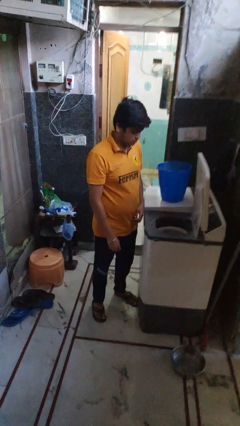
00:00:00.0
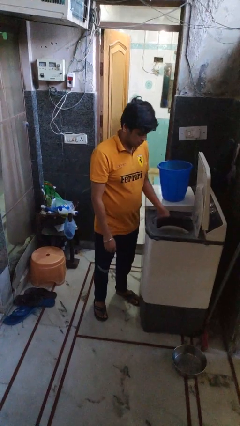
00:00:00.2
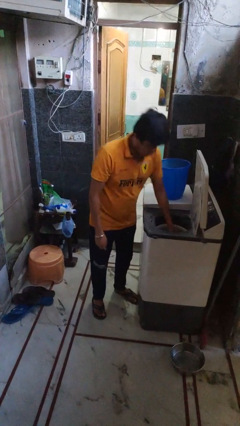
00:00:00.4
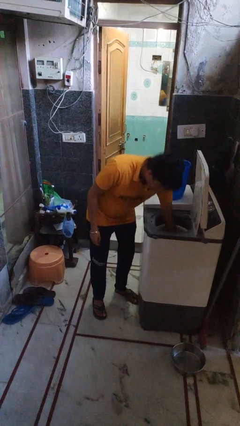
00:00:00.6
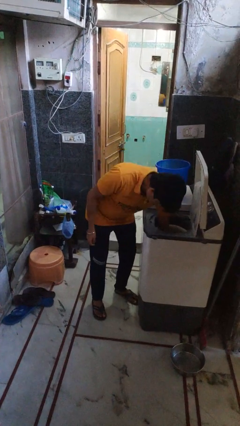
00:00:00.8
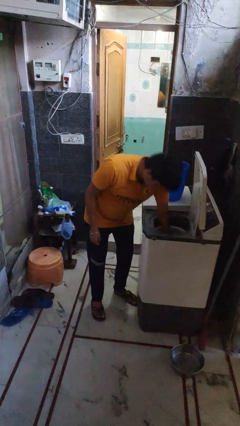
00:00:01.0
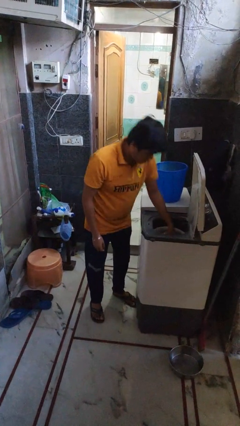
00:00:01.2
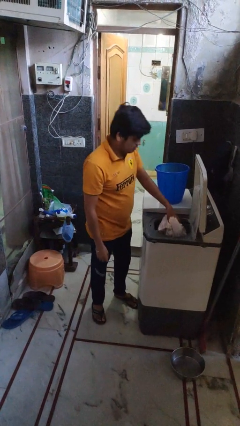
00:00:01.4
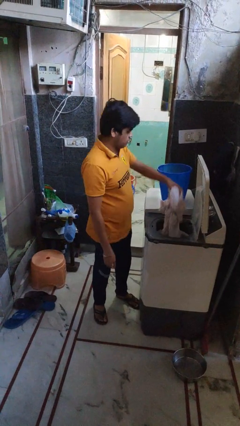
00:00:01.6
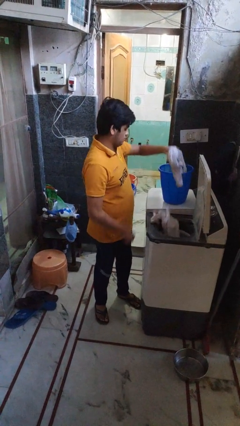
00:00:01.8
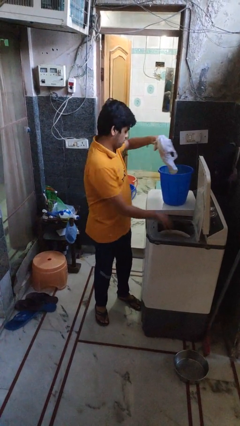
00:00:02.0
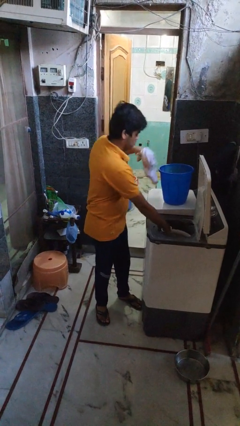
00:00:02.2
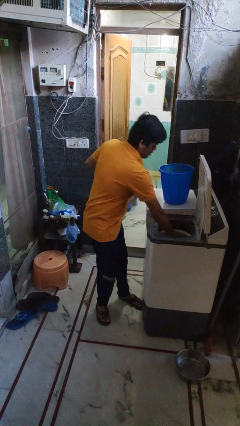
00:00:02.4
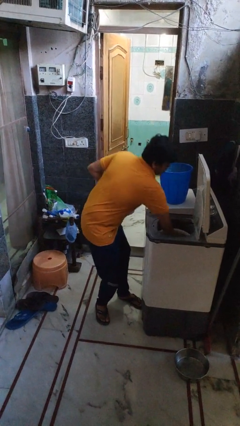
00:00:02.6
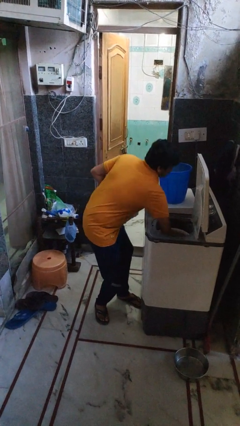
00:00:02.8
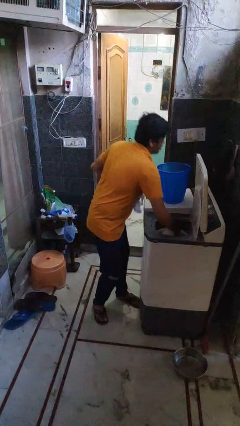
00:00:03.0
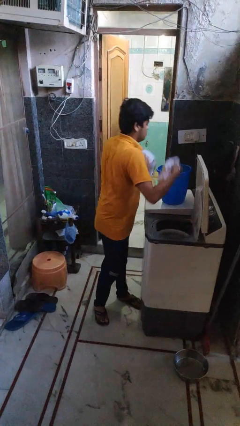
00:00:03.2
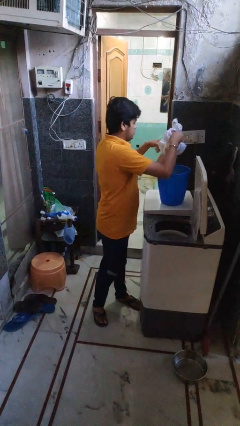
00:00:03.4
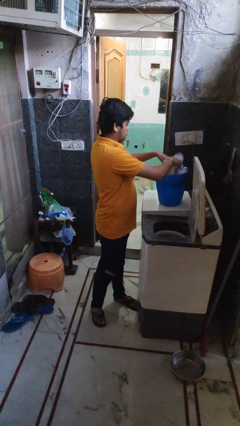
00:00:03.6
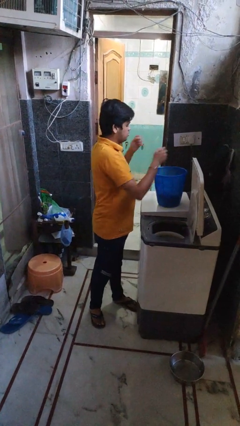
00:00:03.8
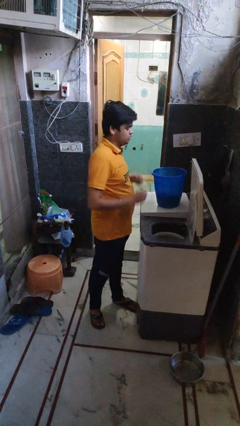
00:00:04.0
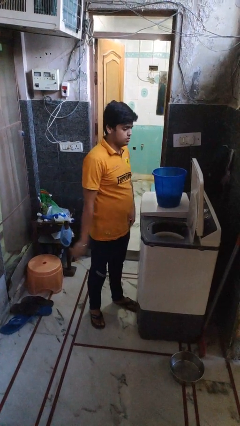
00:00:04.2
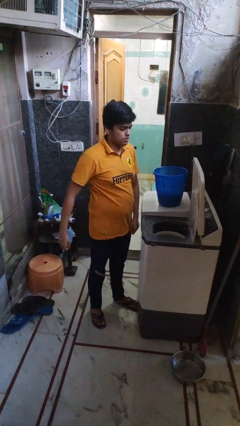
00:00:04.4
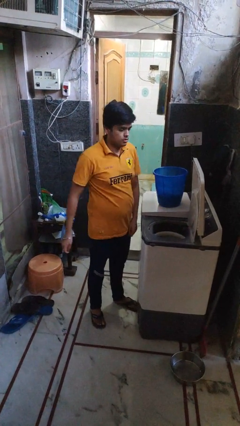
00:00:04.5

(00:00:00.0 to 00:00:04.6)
person unloads clotheswasher

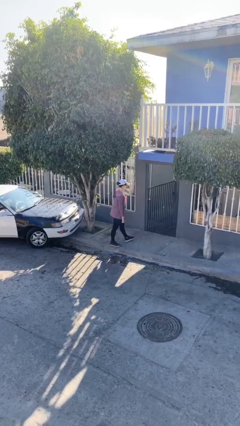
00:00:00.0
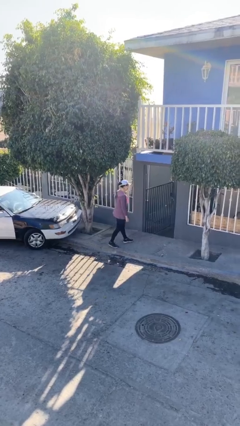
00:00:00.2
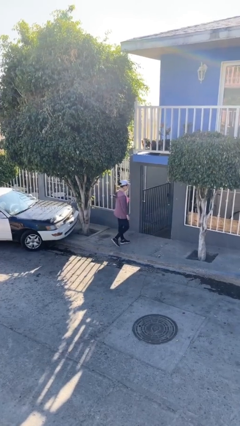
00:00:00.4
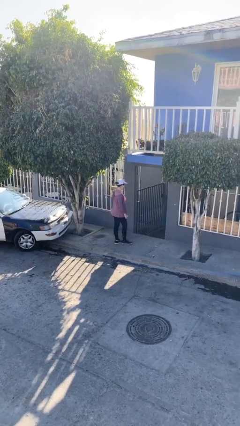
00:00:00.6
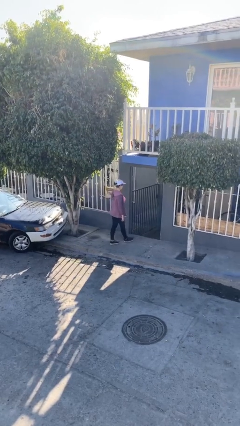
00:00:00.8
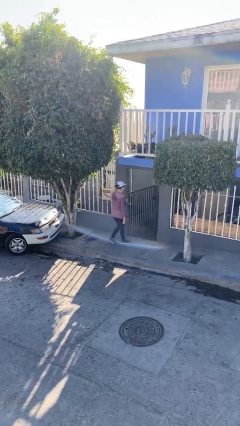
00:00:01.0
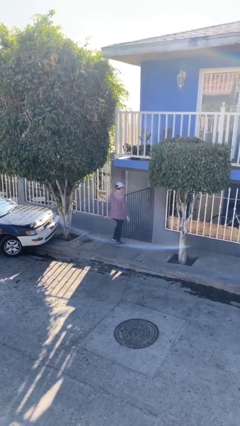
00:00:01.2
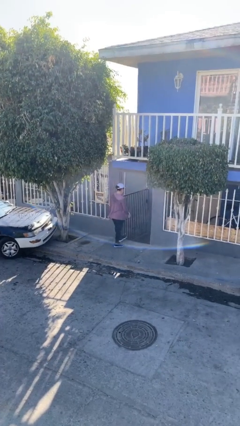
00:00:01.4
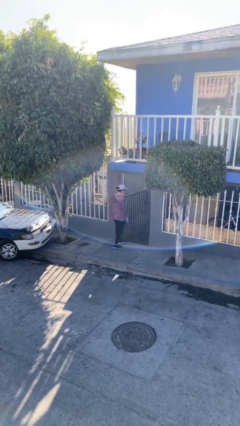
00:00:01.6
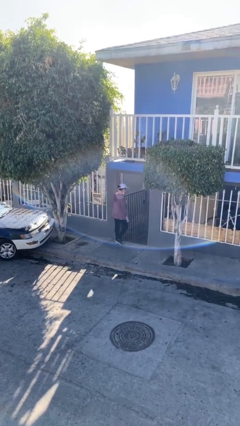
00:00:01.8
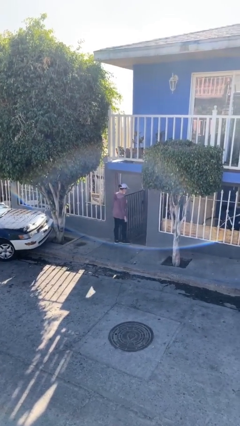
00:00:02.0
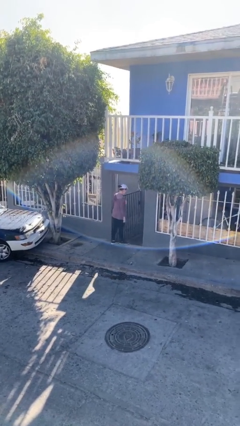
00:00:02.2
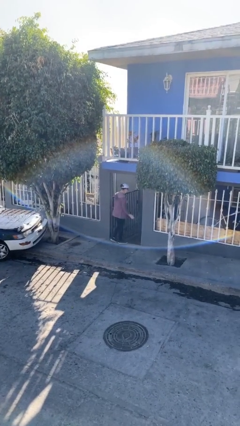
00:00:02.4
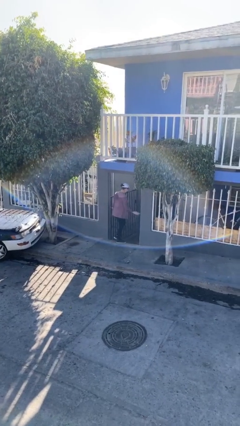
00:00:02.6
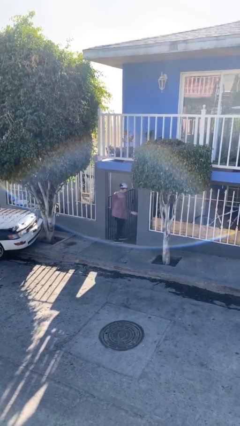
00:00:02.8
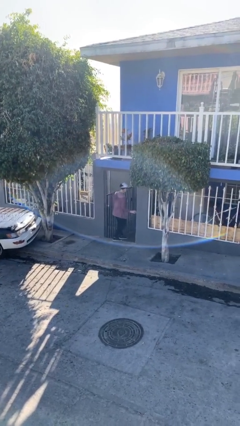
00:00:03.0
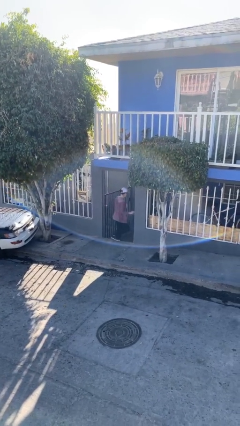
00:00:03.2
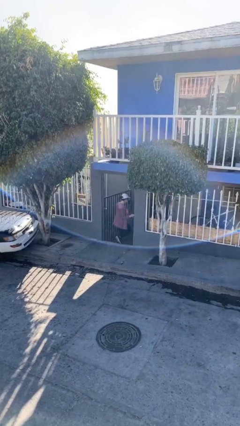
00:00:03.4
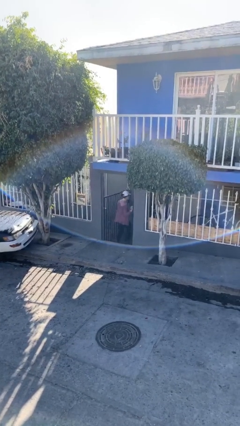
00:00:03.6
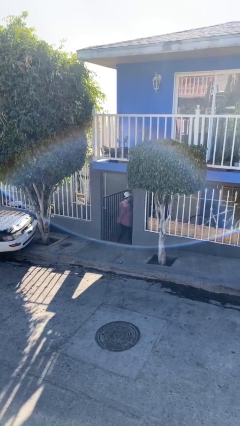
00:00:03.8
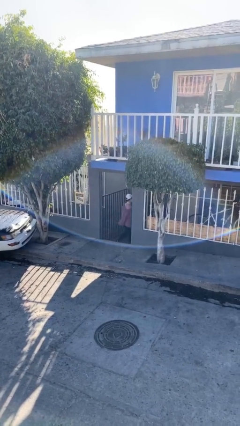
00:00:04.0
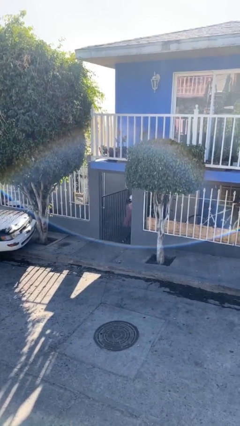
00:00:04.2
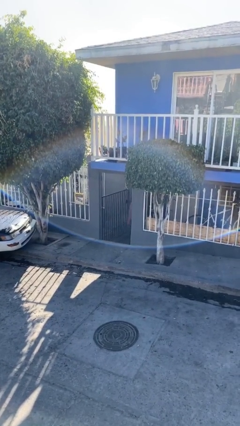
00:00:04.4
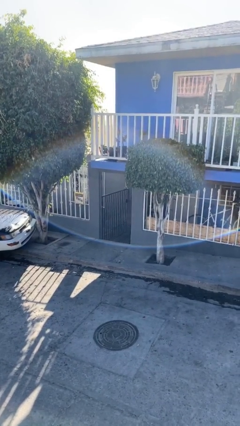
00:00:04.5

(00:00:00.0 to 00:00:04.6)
person exits scene through structure

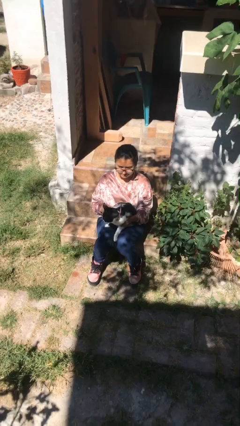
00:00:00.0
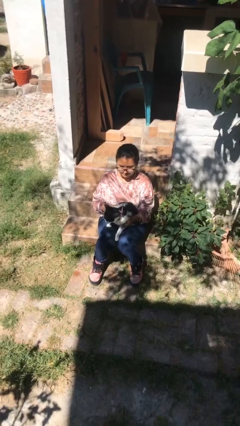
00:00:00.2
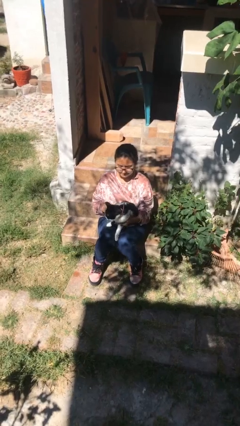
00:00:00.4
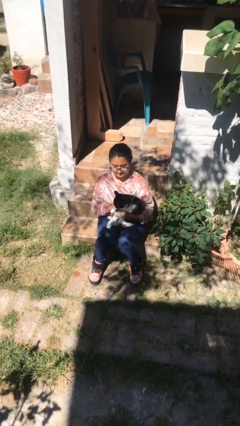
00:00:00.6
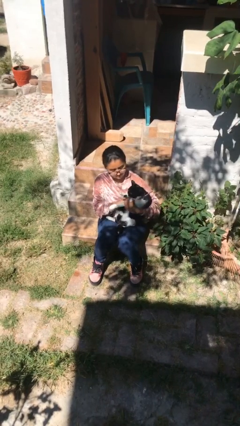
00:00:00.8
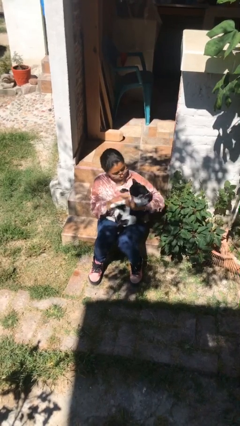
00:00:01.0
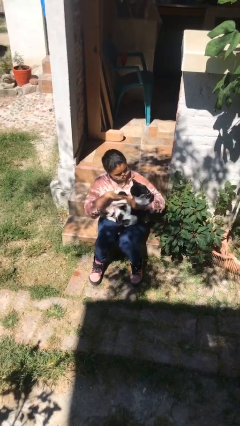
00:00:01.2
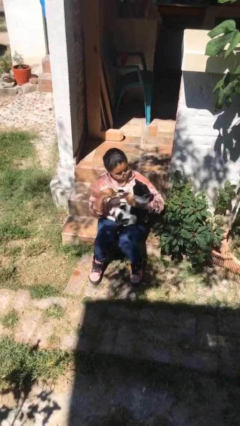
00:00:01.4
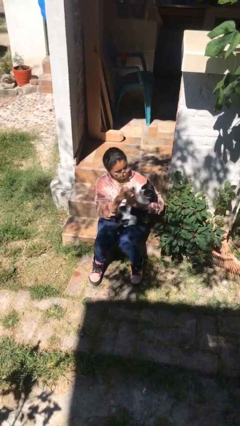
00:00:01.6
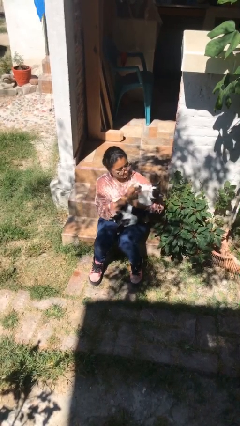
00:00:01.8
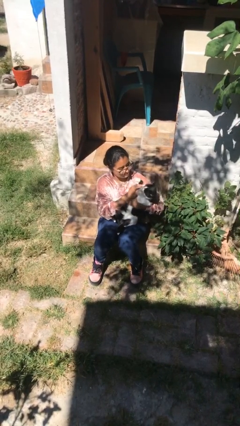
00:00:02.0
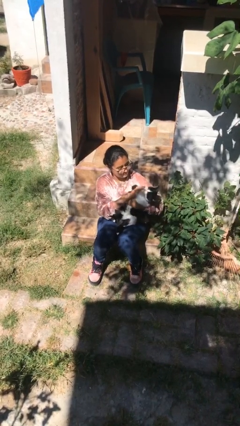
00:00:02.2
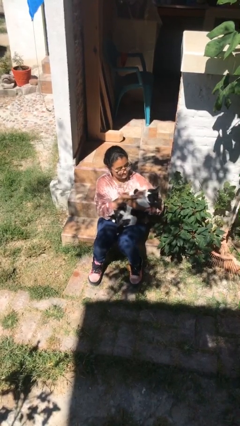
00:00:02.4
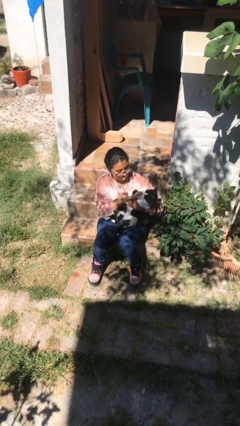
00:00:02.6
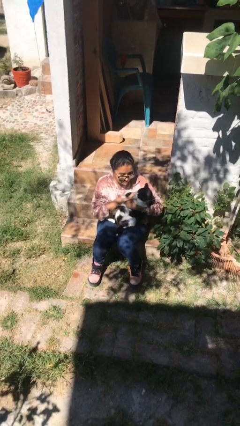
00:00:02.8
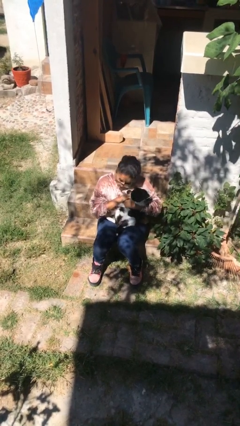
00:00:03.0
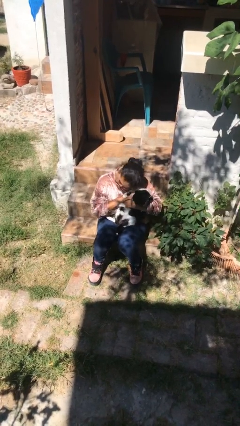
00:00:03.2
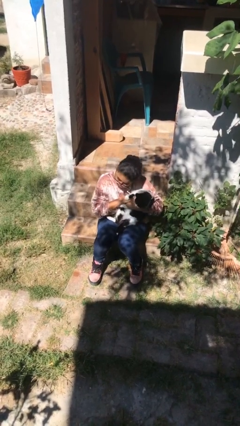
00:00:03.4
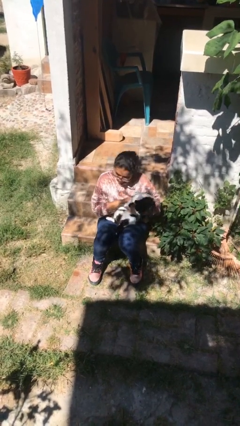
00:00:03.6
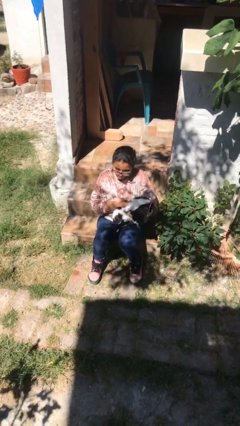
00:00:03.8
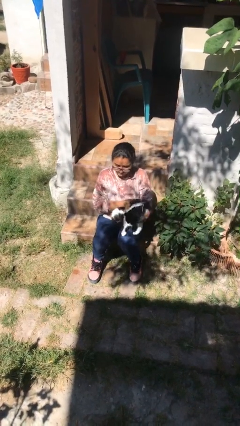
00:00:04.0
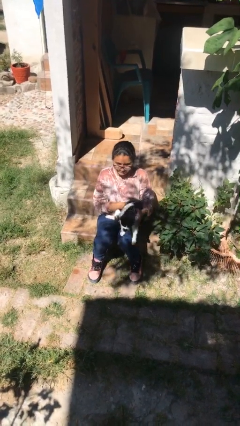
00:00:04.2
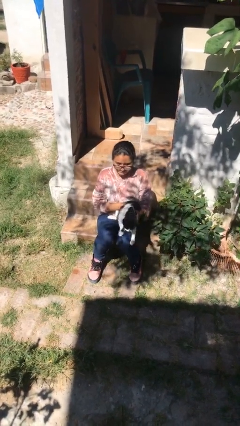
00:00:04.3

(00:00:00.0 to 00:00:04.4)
person hugs cat

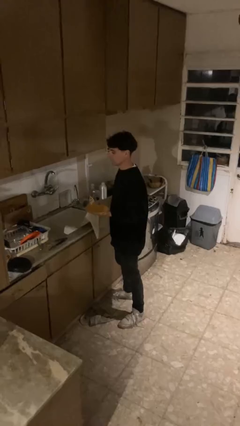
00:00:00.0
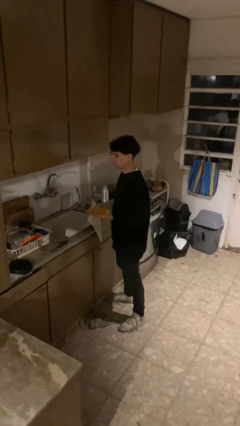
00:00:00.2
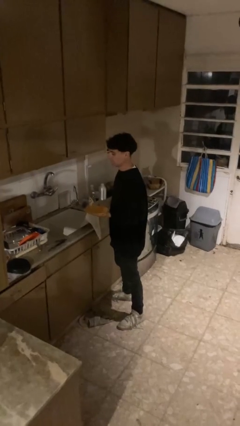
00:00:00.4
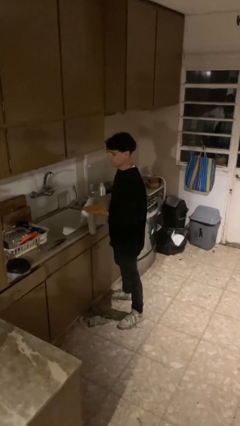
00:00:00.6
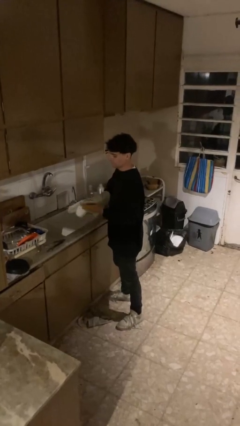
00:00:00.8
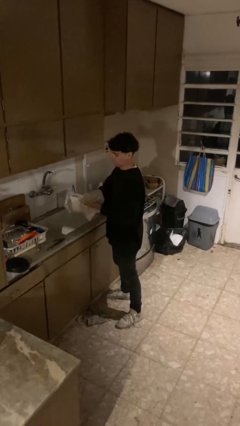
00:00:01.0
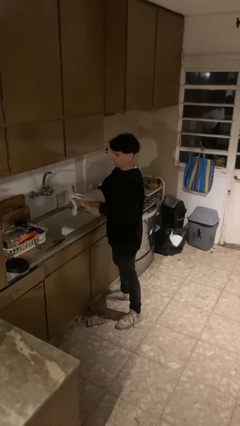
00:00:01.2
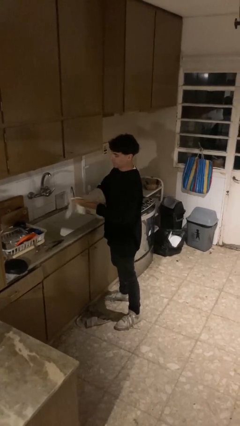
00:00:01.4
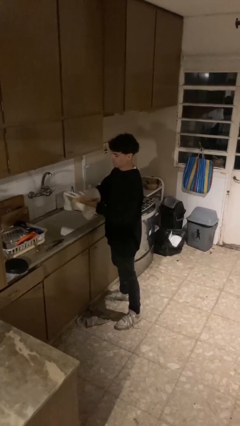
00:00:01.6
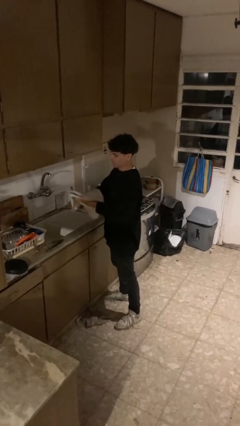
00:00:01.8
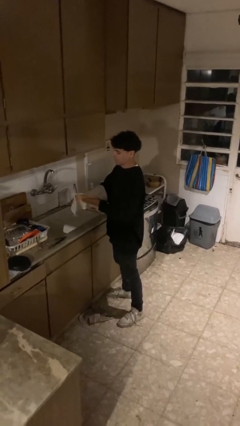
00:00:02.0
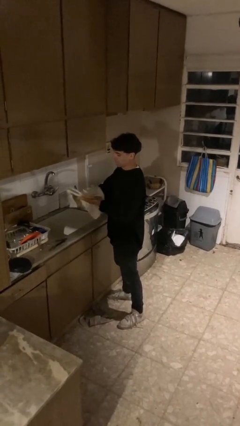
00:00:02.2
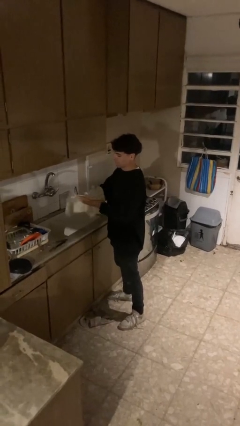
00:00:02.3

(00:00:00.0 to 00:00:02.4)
person dries dish

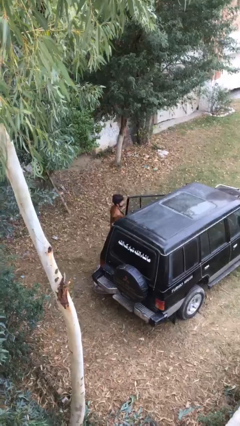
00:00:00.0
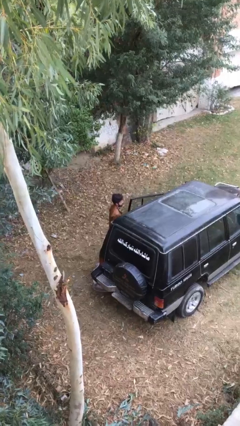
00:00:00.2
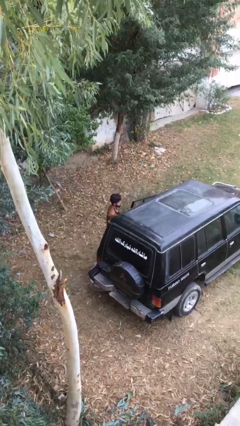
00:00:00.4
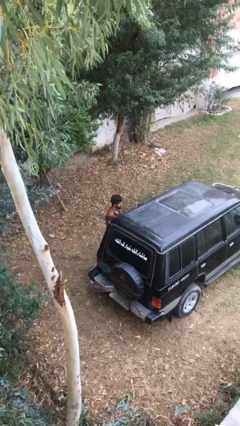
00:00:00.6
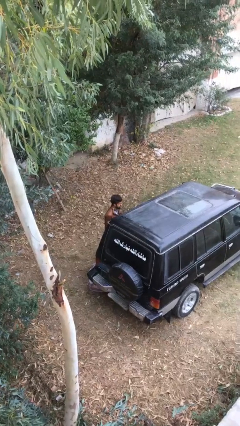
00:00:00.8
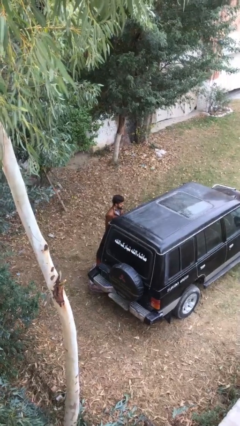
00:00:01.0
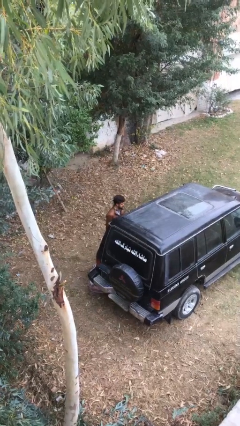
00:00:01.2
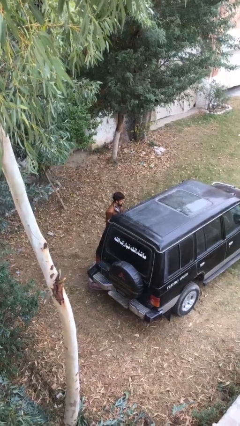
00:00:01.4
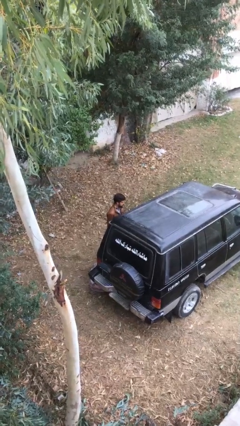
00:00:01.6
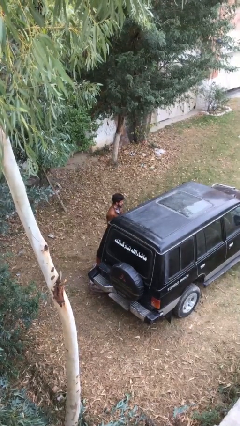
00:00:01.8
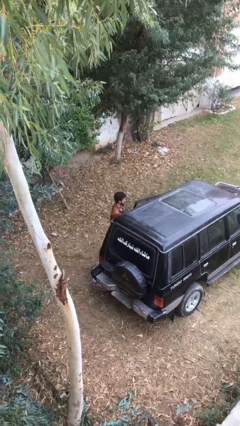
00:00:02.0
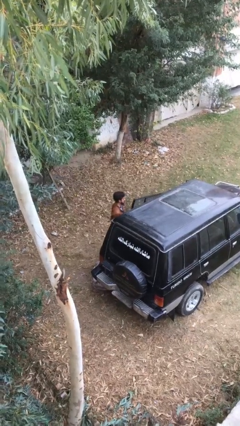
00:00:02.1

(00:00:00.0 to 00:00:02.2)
person closes car door
